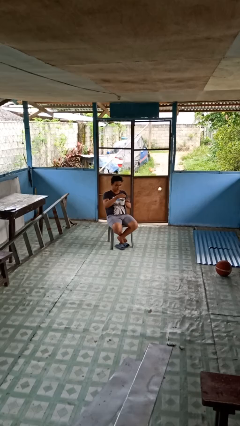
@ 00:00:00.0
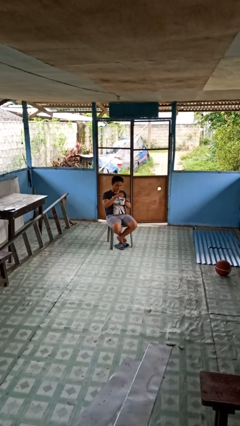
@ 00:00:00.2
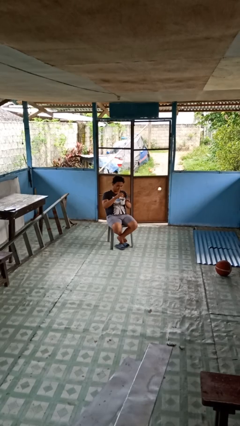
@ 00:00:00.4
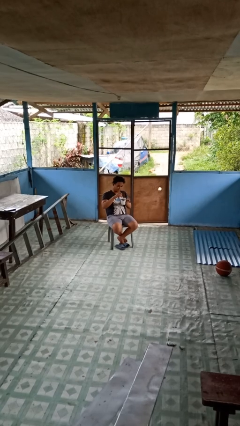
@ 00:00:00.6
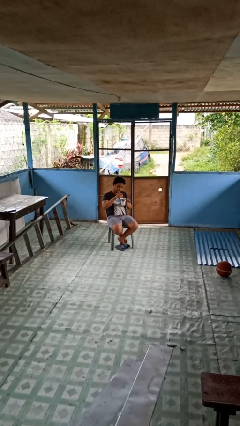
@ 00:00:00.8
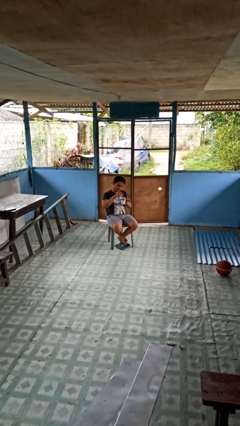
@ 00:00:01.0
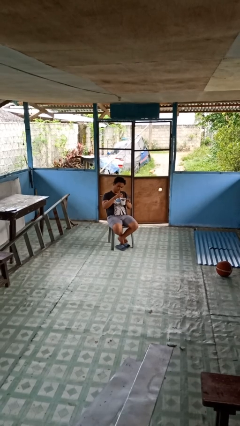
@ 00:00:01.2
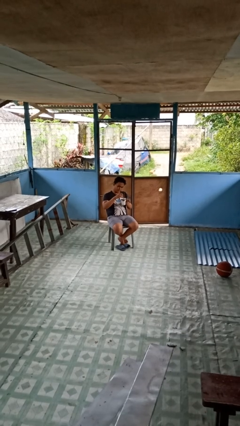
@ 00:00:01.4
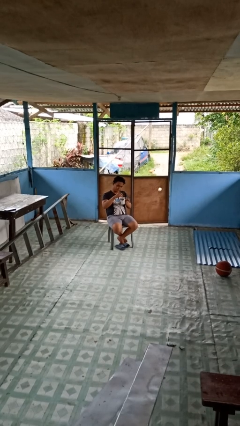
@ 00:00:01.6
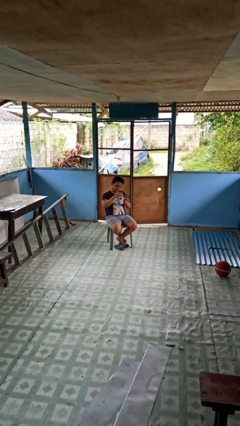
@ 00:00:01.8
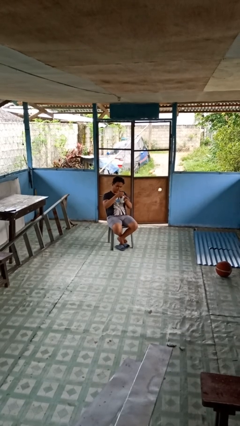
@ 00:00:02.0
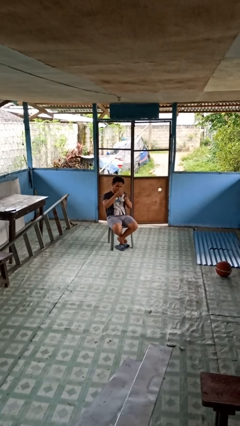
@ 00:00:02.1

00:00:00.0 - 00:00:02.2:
person stirs mug

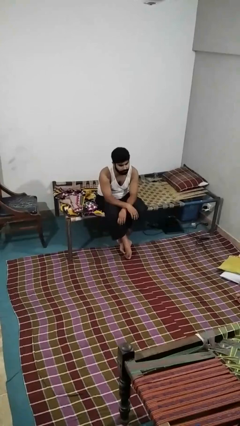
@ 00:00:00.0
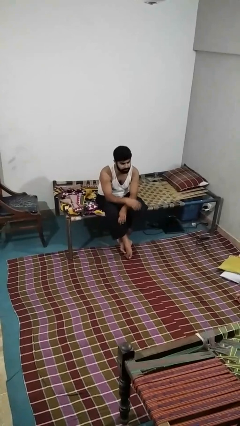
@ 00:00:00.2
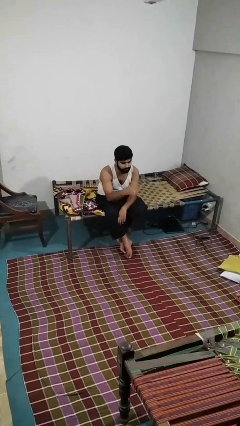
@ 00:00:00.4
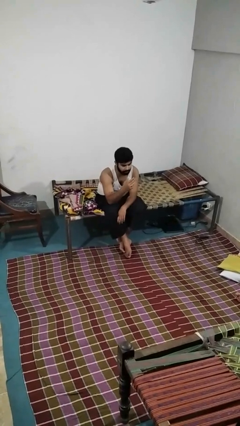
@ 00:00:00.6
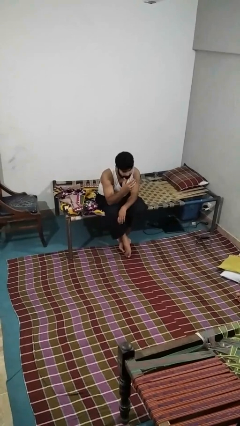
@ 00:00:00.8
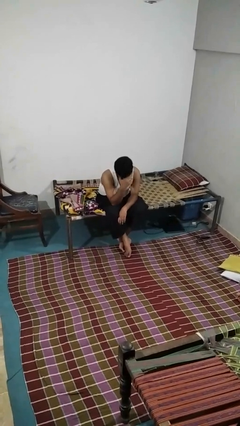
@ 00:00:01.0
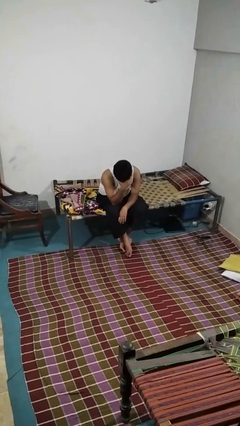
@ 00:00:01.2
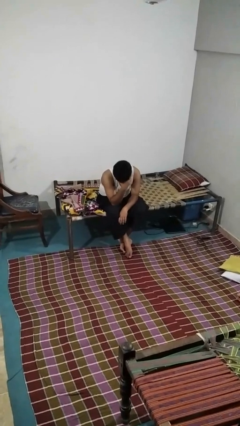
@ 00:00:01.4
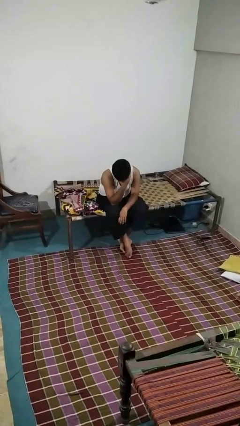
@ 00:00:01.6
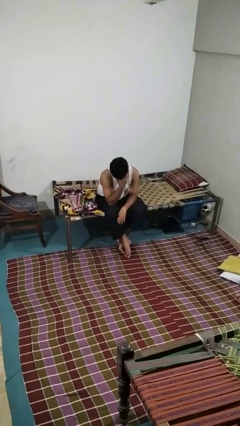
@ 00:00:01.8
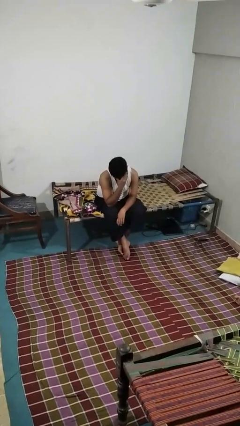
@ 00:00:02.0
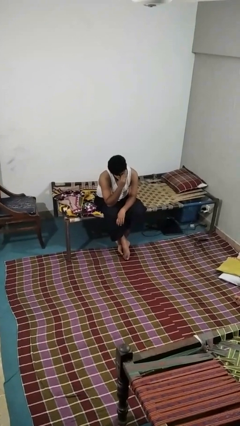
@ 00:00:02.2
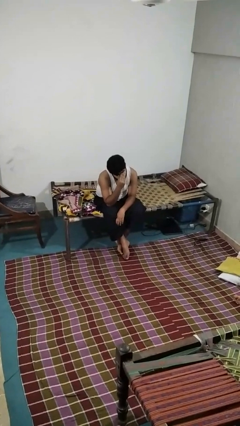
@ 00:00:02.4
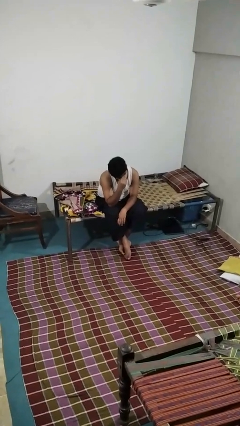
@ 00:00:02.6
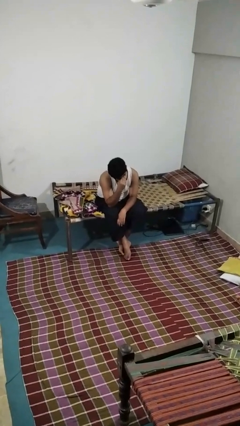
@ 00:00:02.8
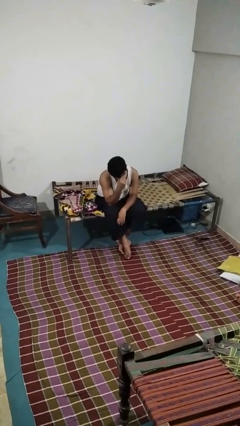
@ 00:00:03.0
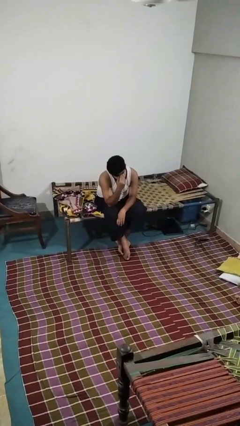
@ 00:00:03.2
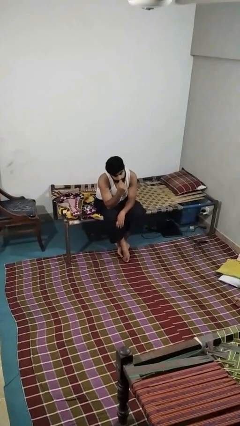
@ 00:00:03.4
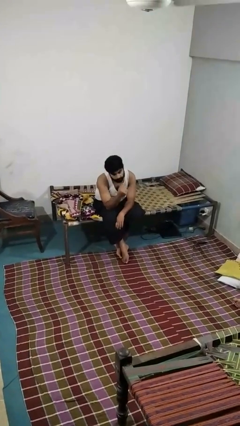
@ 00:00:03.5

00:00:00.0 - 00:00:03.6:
person covers face with hands

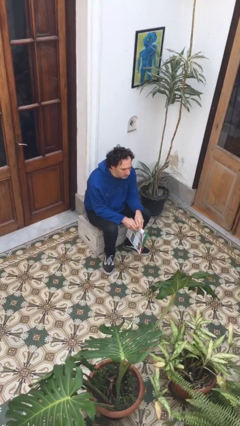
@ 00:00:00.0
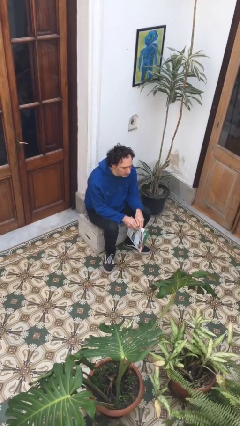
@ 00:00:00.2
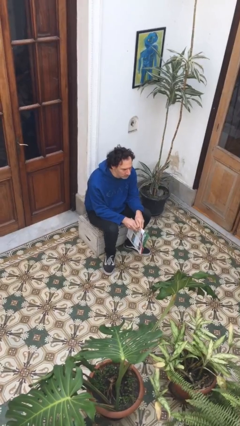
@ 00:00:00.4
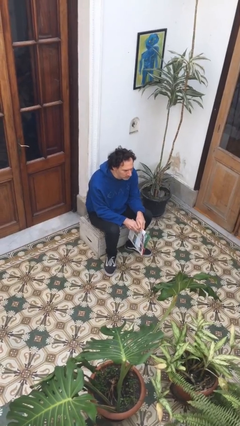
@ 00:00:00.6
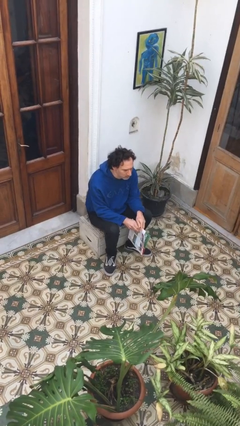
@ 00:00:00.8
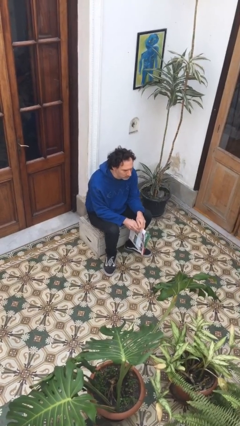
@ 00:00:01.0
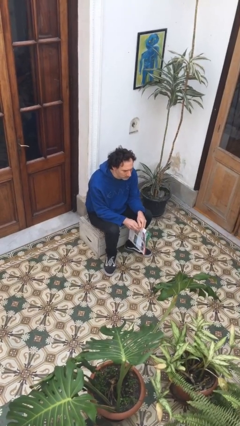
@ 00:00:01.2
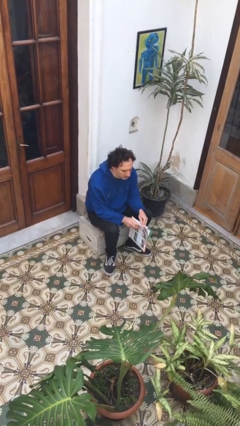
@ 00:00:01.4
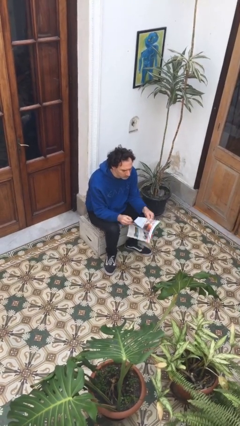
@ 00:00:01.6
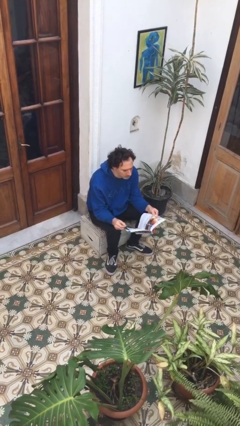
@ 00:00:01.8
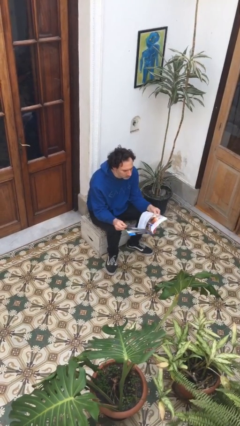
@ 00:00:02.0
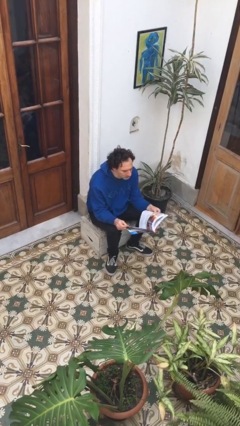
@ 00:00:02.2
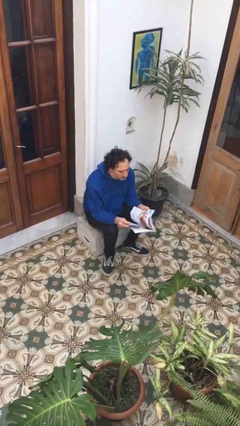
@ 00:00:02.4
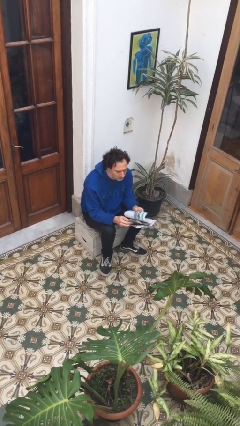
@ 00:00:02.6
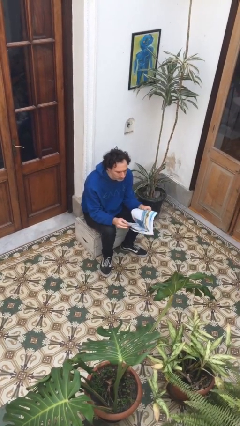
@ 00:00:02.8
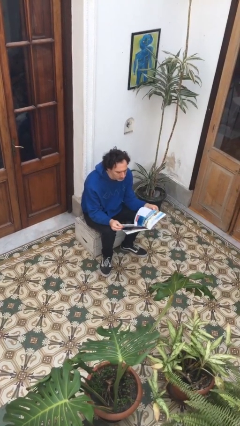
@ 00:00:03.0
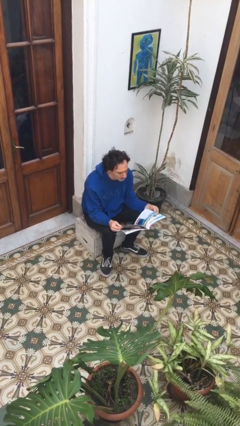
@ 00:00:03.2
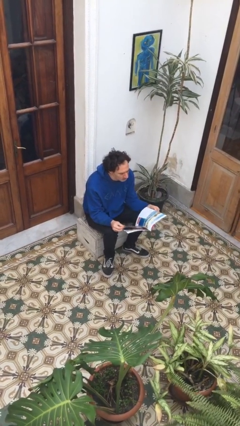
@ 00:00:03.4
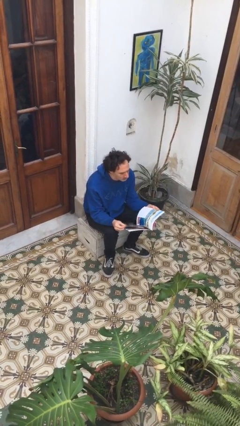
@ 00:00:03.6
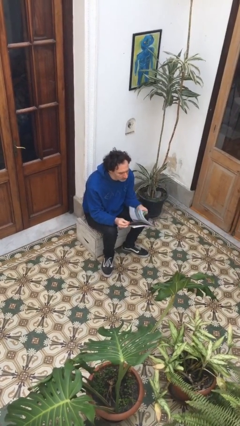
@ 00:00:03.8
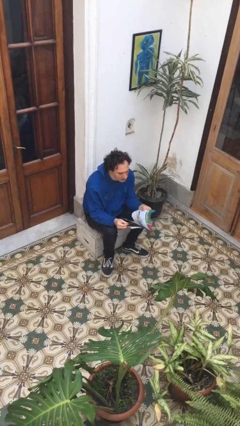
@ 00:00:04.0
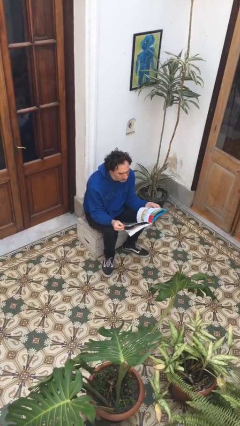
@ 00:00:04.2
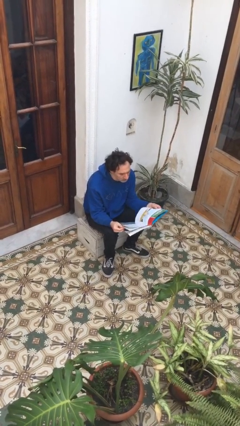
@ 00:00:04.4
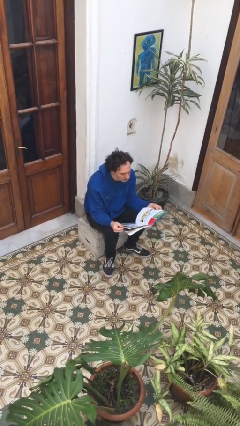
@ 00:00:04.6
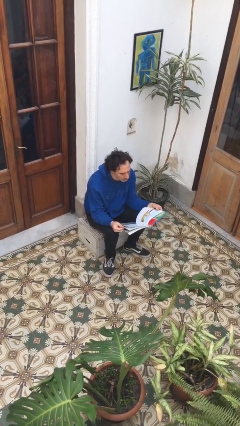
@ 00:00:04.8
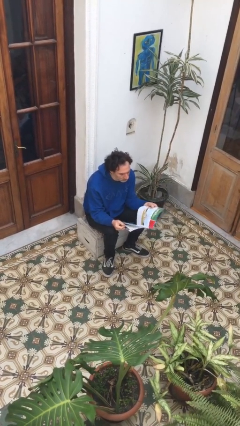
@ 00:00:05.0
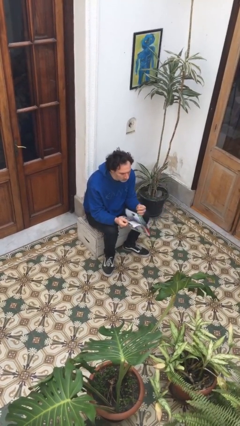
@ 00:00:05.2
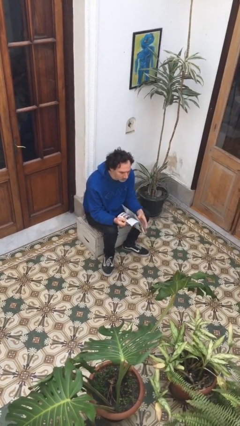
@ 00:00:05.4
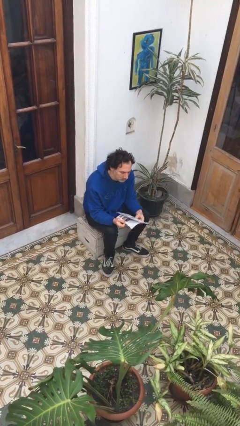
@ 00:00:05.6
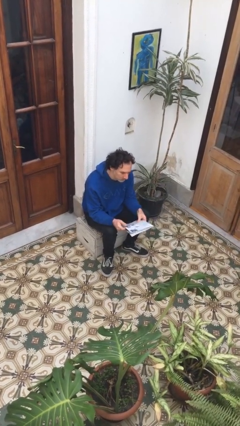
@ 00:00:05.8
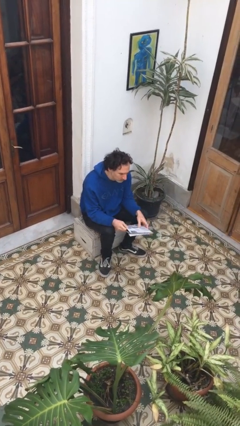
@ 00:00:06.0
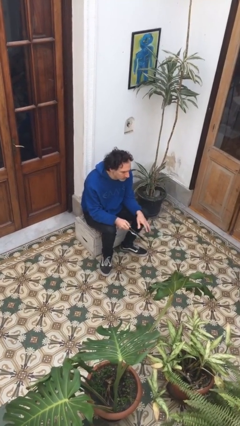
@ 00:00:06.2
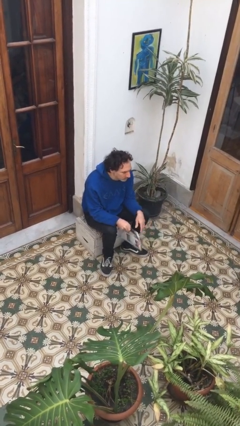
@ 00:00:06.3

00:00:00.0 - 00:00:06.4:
person reads magazine

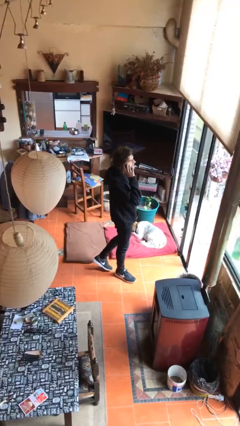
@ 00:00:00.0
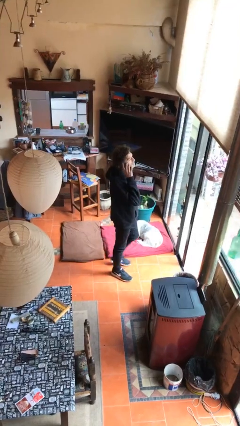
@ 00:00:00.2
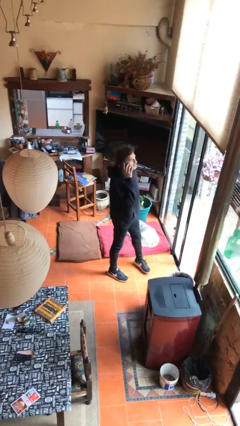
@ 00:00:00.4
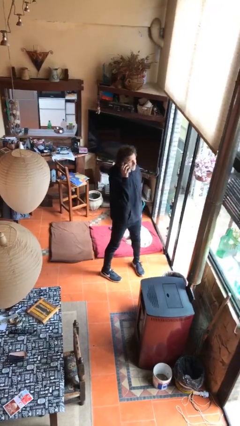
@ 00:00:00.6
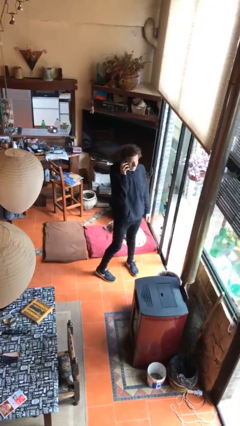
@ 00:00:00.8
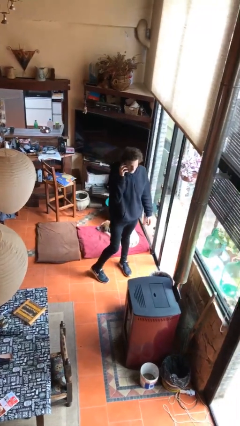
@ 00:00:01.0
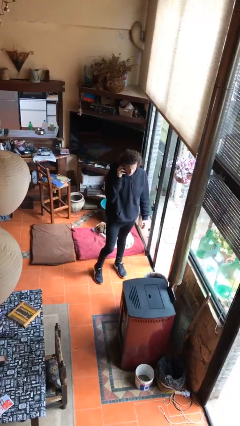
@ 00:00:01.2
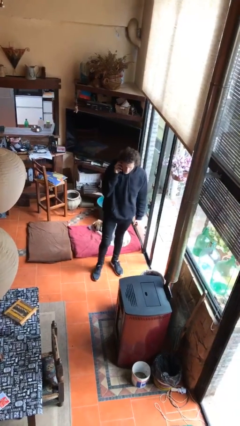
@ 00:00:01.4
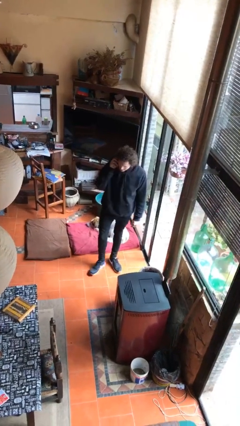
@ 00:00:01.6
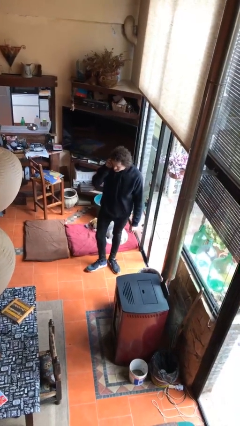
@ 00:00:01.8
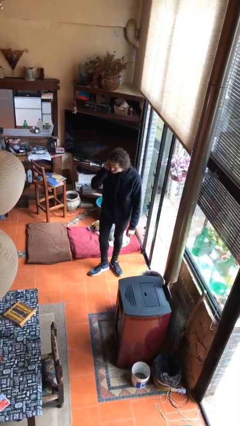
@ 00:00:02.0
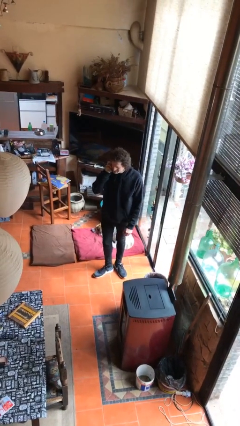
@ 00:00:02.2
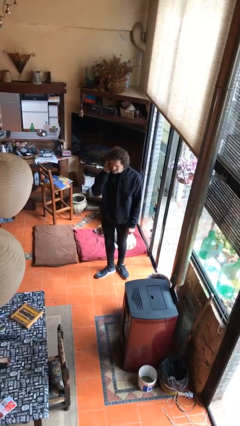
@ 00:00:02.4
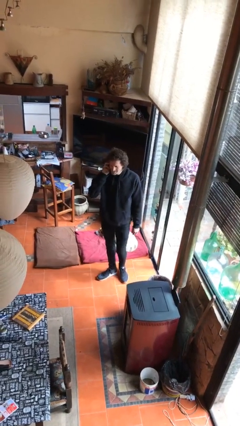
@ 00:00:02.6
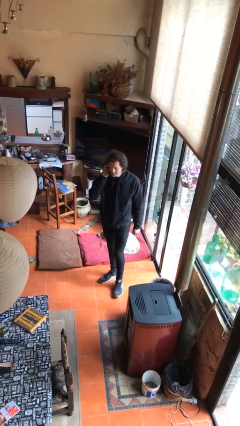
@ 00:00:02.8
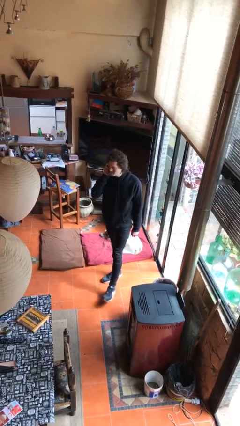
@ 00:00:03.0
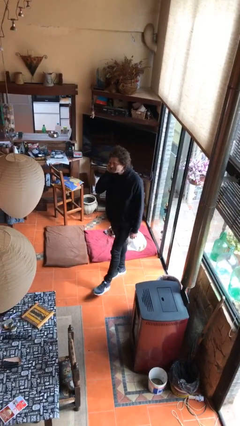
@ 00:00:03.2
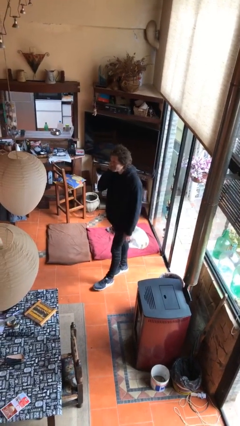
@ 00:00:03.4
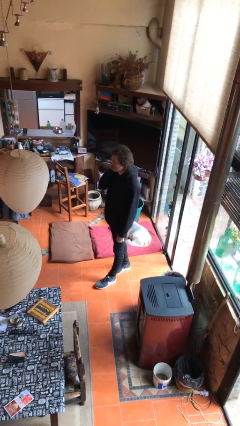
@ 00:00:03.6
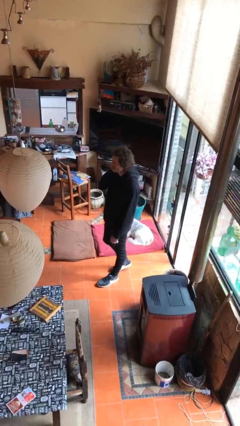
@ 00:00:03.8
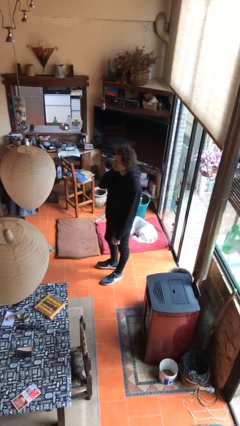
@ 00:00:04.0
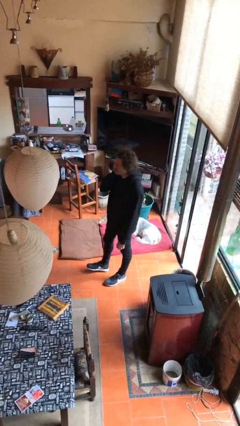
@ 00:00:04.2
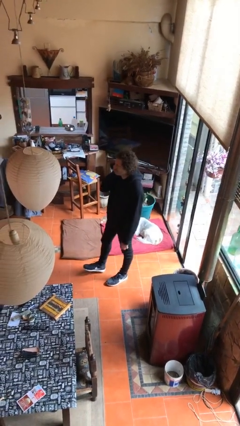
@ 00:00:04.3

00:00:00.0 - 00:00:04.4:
person talks on phone

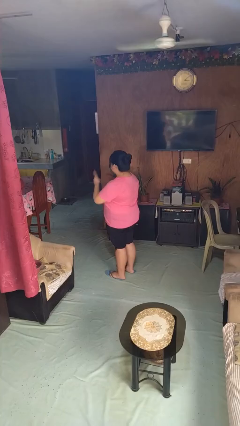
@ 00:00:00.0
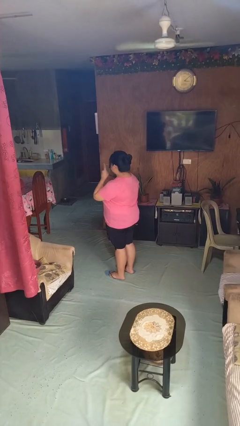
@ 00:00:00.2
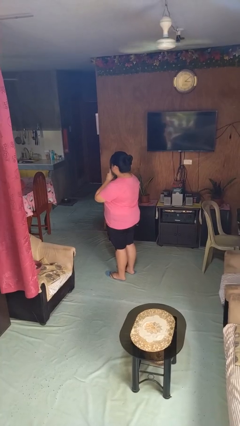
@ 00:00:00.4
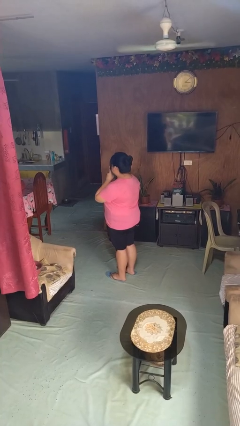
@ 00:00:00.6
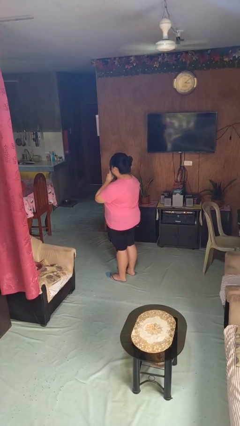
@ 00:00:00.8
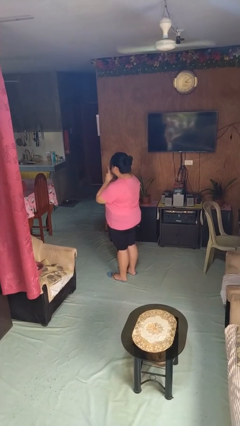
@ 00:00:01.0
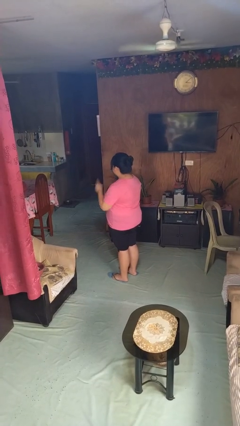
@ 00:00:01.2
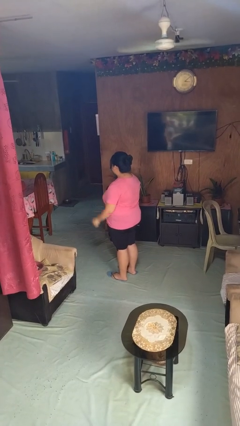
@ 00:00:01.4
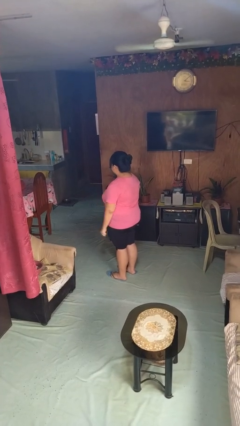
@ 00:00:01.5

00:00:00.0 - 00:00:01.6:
person gestures be quiet
